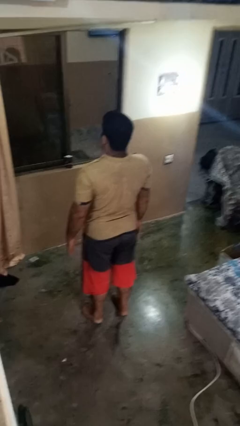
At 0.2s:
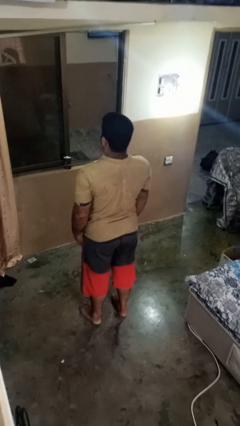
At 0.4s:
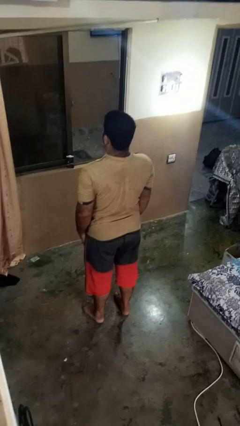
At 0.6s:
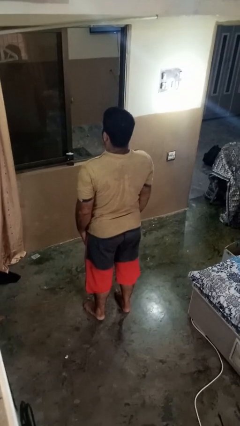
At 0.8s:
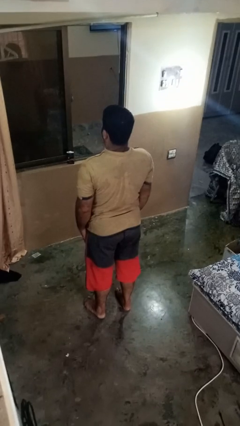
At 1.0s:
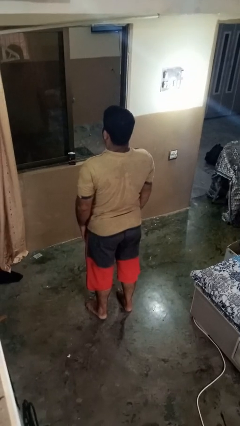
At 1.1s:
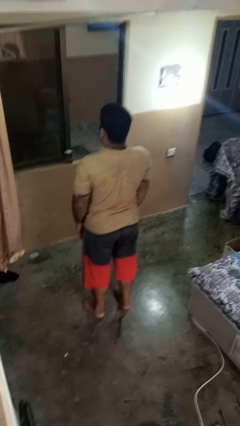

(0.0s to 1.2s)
person stands up

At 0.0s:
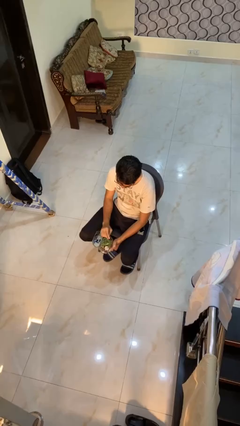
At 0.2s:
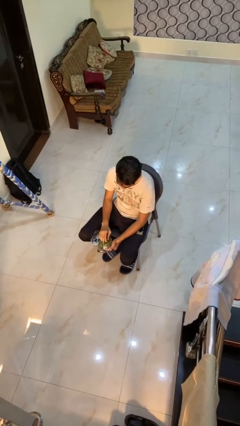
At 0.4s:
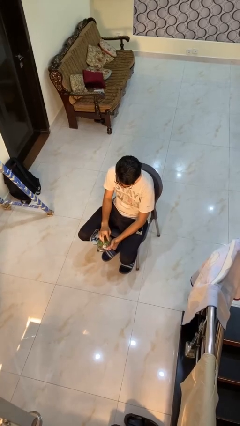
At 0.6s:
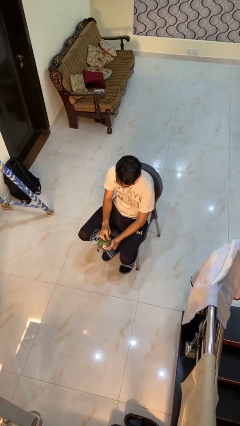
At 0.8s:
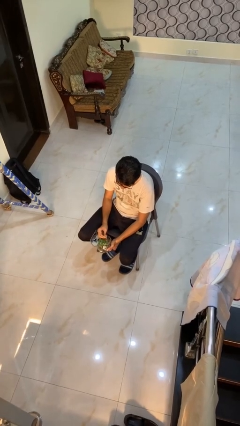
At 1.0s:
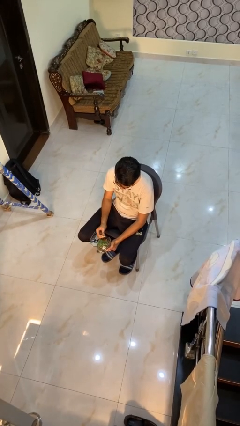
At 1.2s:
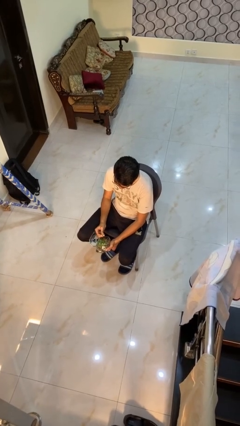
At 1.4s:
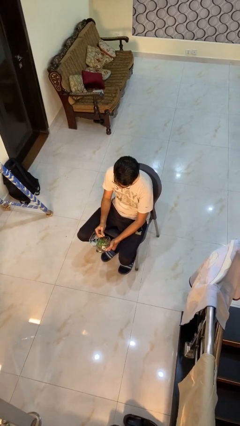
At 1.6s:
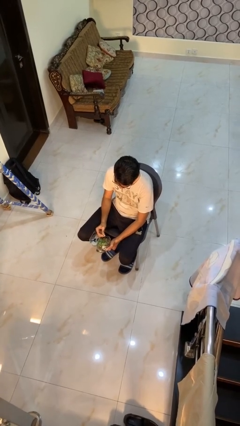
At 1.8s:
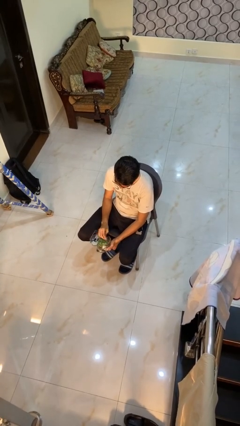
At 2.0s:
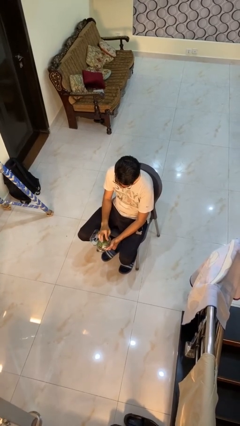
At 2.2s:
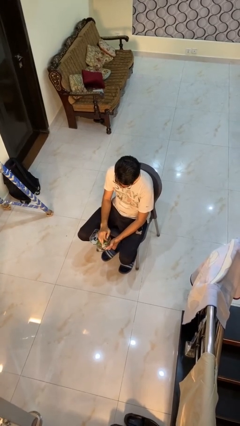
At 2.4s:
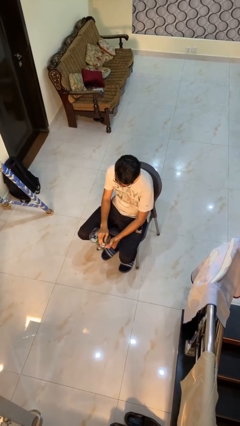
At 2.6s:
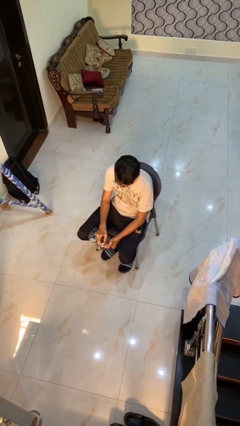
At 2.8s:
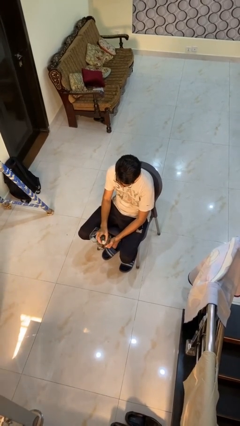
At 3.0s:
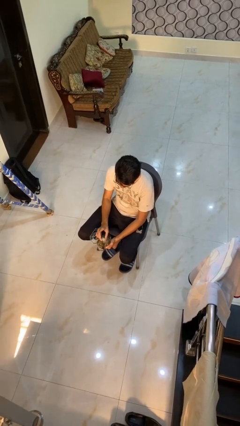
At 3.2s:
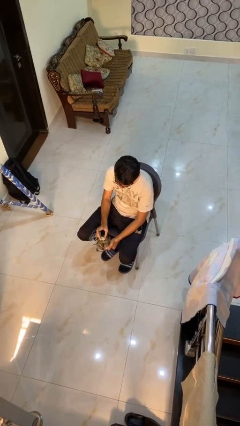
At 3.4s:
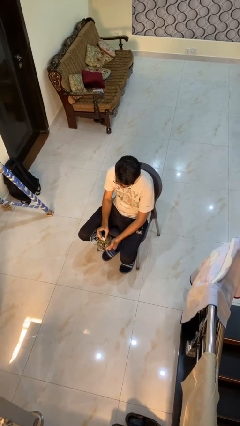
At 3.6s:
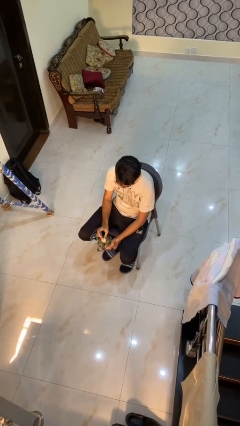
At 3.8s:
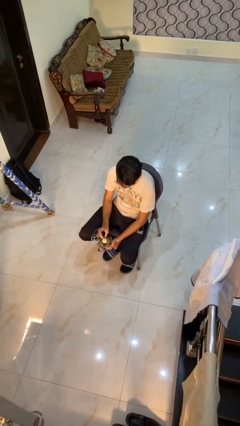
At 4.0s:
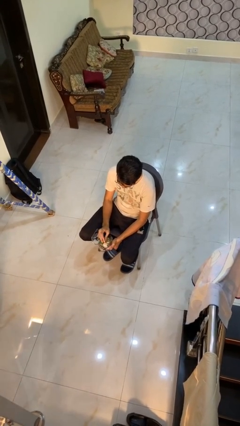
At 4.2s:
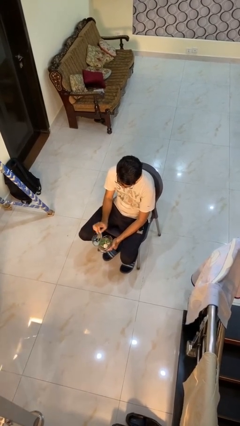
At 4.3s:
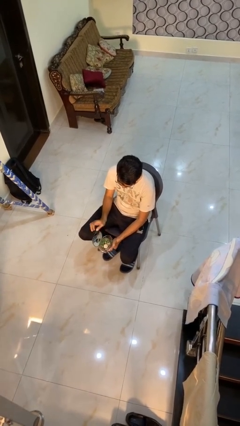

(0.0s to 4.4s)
person searches jewelry box

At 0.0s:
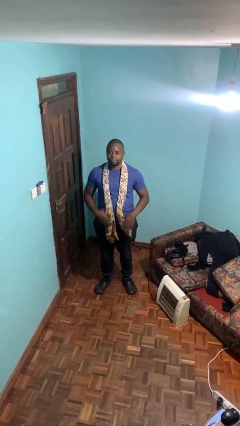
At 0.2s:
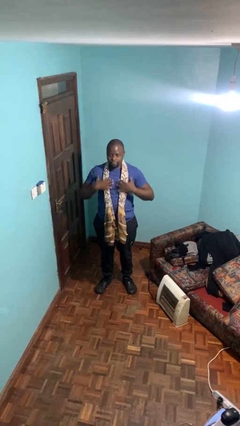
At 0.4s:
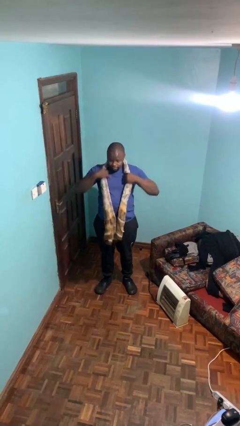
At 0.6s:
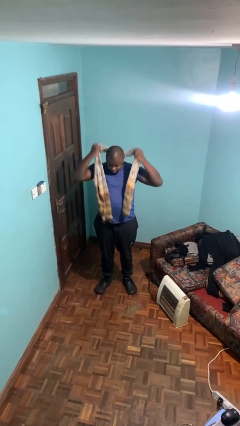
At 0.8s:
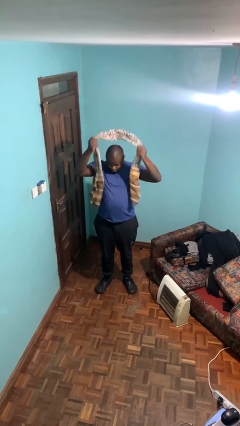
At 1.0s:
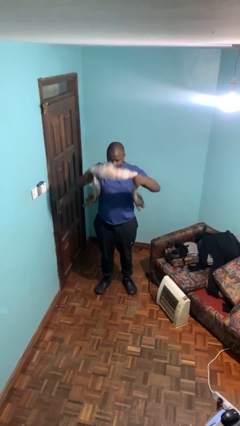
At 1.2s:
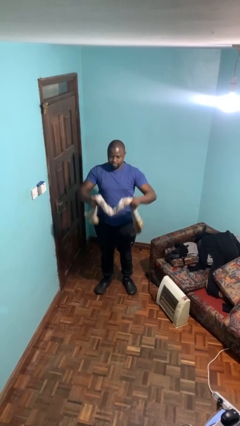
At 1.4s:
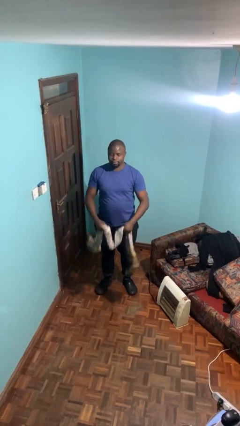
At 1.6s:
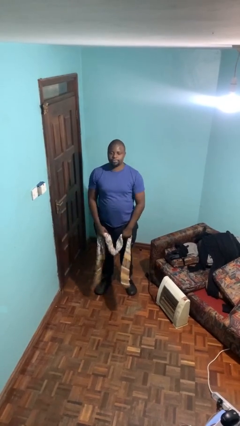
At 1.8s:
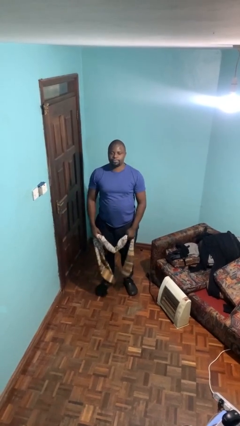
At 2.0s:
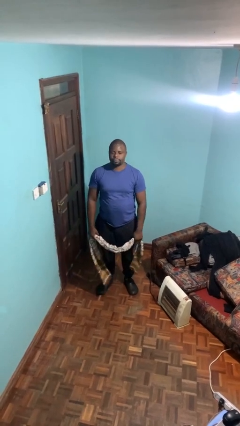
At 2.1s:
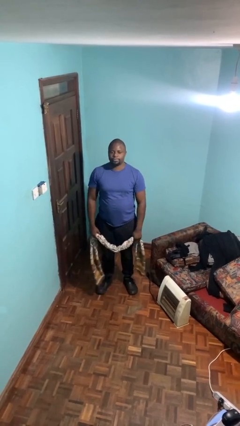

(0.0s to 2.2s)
person takes off scarf

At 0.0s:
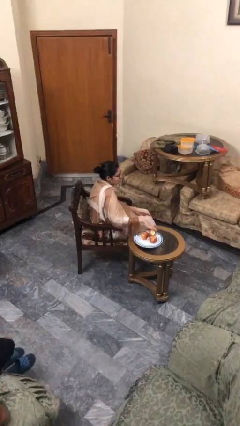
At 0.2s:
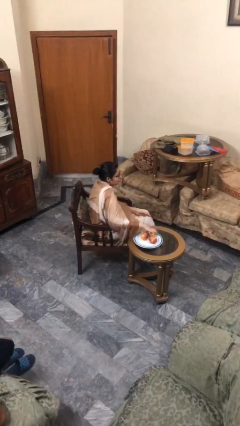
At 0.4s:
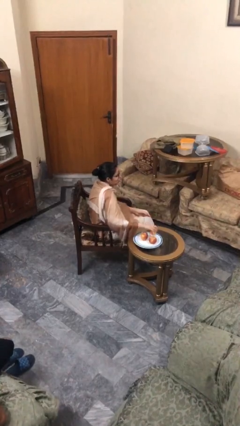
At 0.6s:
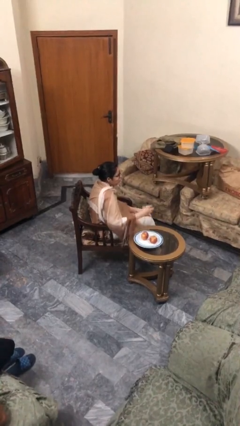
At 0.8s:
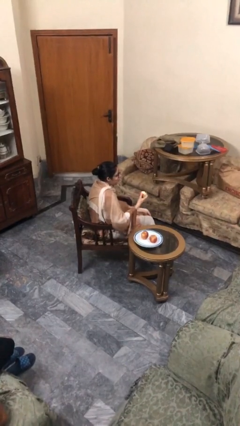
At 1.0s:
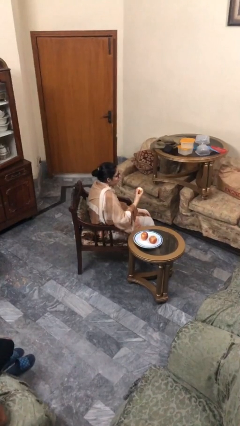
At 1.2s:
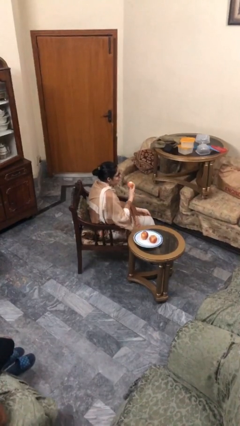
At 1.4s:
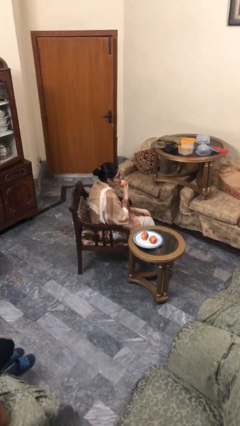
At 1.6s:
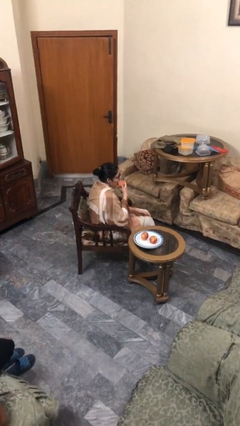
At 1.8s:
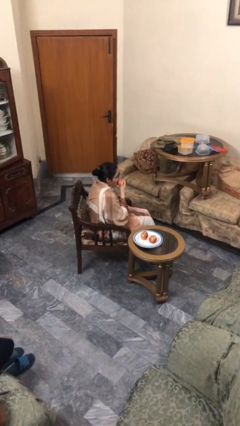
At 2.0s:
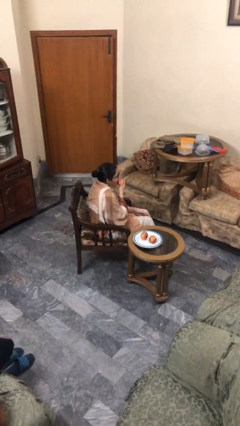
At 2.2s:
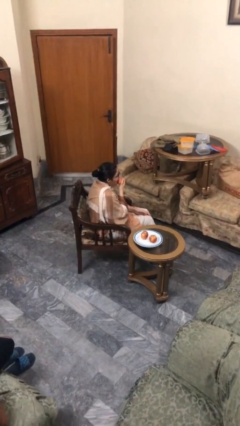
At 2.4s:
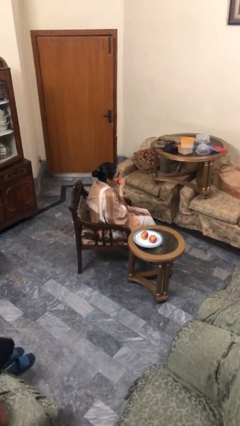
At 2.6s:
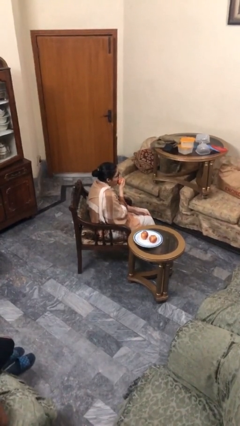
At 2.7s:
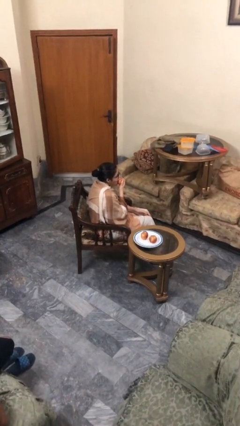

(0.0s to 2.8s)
person eats apple

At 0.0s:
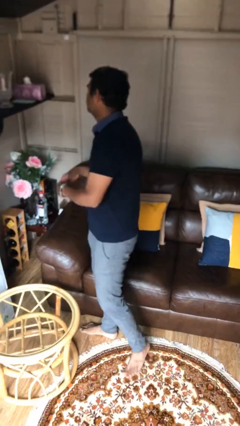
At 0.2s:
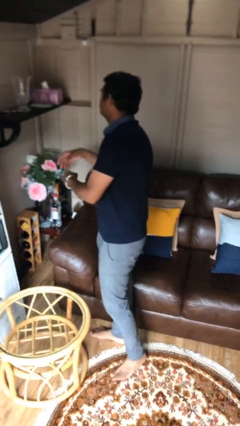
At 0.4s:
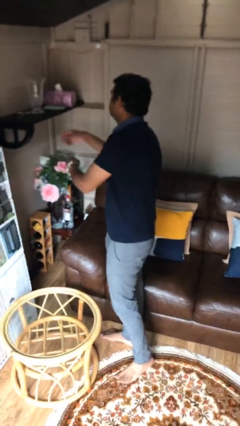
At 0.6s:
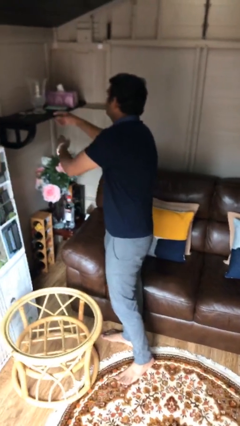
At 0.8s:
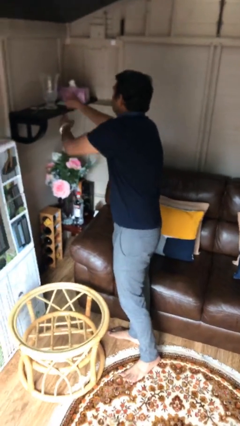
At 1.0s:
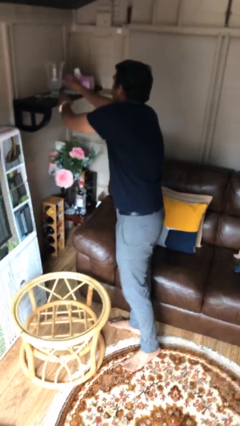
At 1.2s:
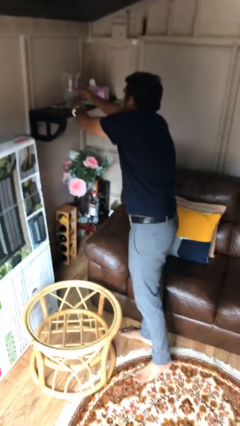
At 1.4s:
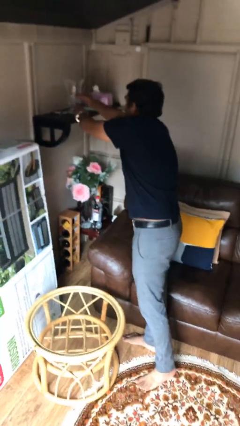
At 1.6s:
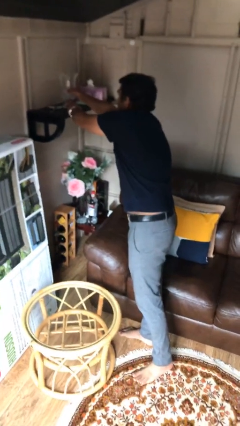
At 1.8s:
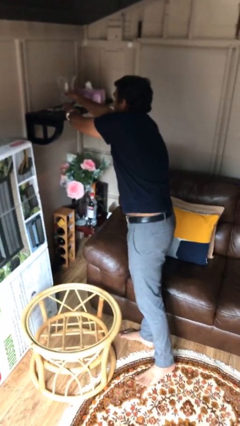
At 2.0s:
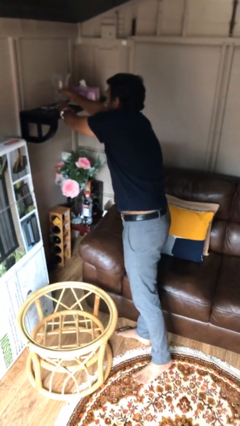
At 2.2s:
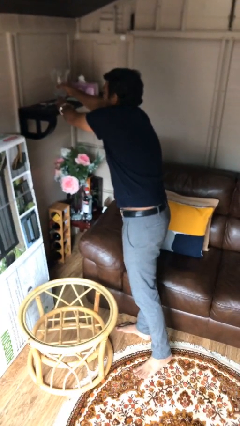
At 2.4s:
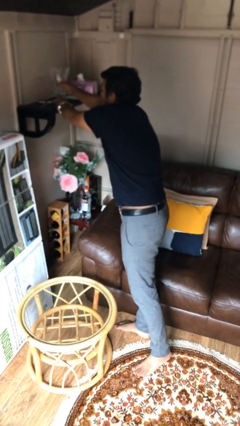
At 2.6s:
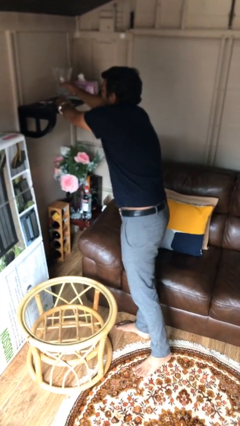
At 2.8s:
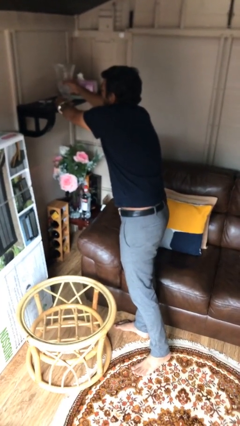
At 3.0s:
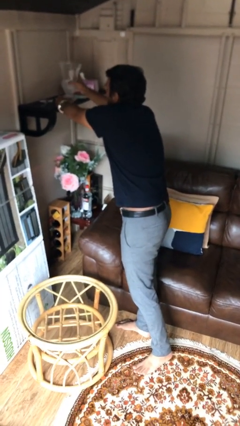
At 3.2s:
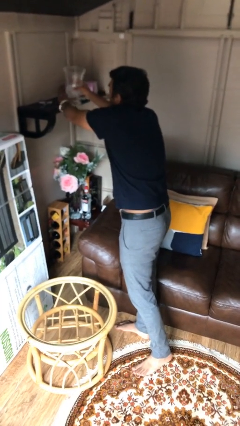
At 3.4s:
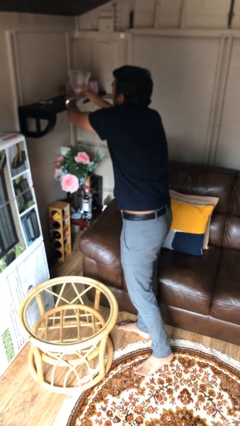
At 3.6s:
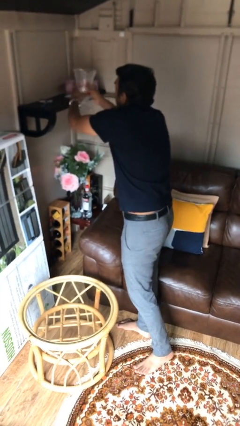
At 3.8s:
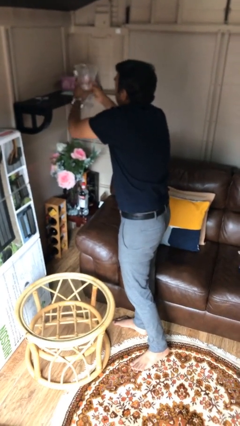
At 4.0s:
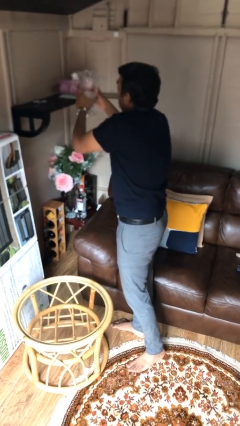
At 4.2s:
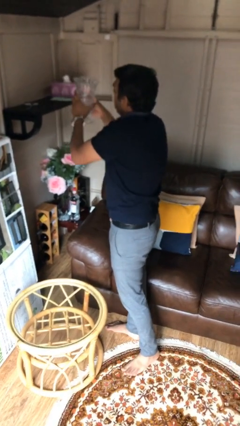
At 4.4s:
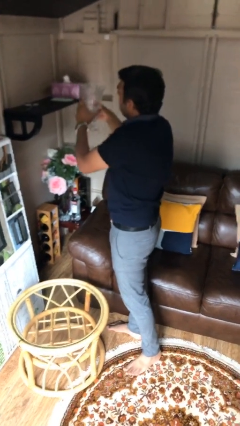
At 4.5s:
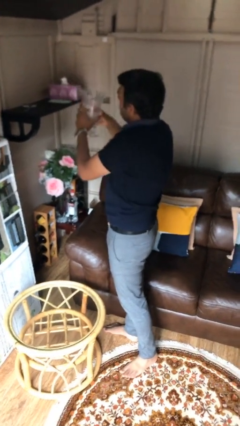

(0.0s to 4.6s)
person picks up object from shelf

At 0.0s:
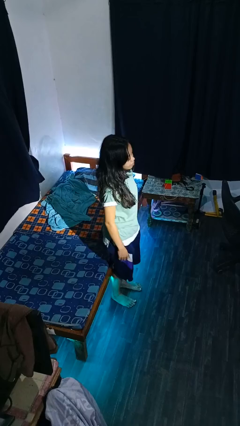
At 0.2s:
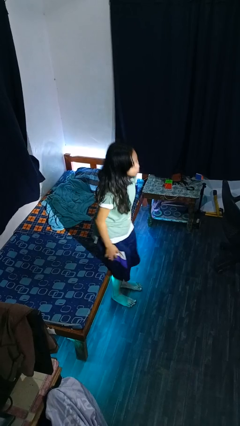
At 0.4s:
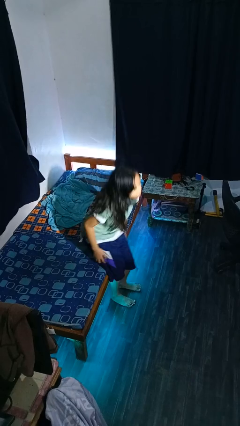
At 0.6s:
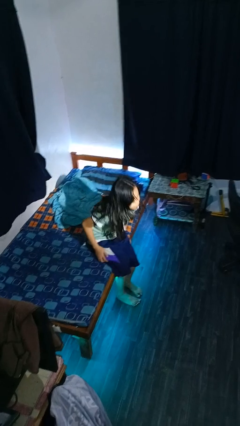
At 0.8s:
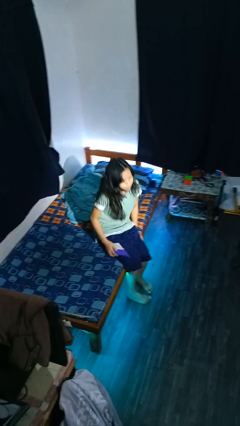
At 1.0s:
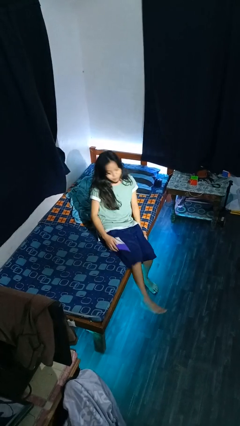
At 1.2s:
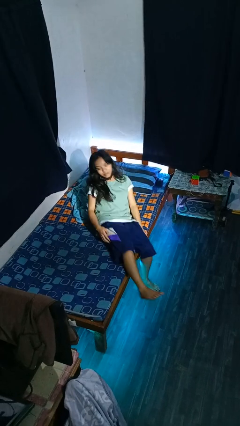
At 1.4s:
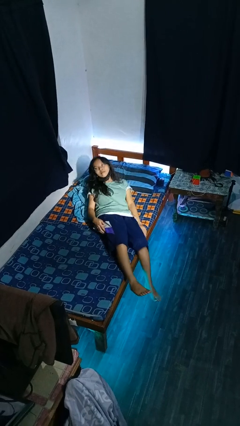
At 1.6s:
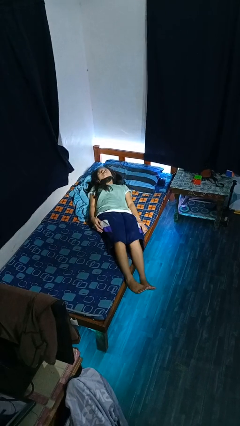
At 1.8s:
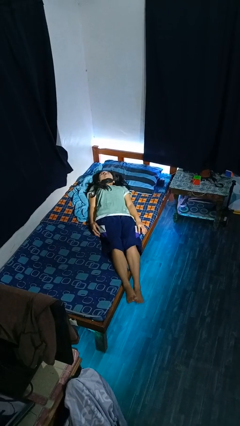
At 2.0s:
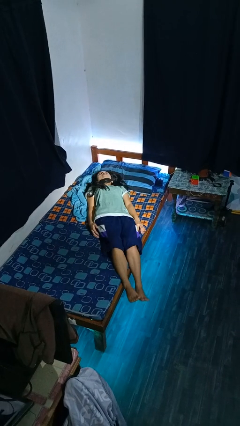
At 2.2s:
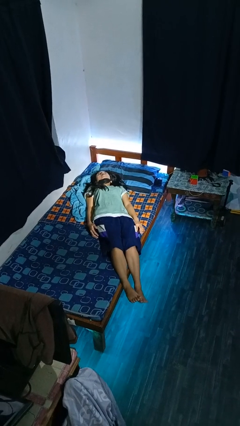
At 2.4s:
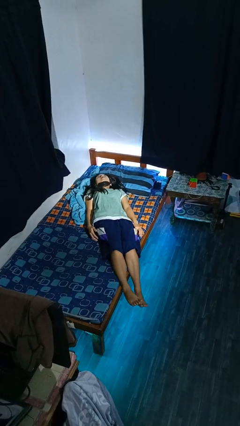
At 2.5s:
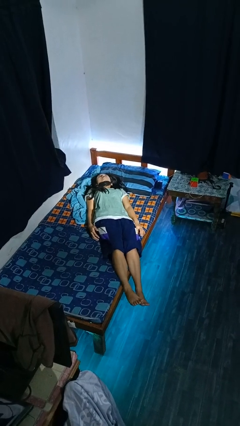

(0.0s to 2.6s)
person lies down on bed
